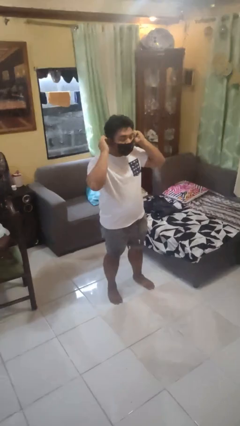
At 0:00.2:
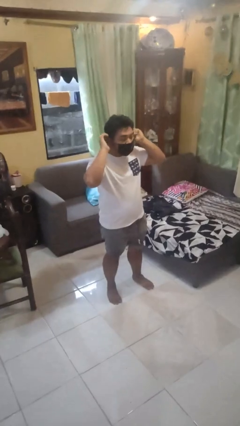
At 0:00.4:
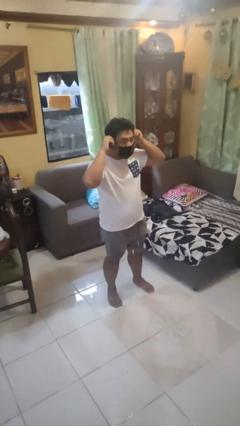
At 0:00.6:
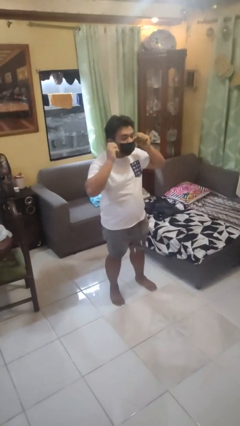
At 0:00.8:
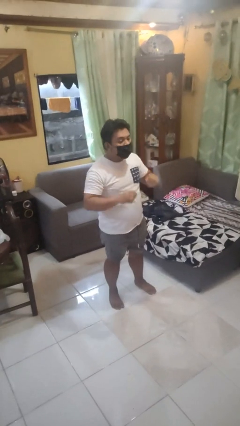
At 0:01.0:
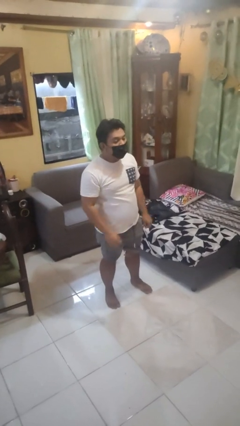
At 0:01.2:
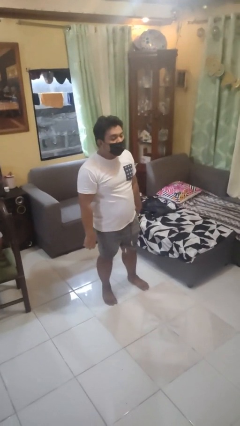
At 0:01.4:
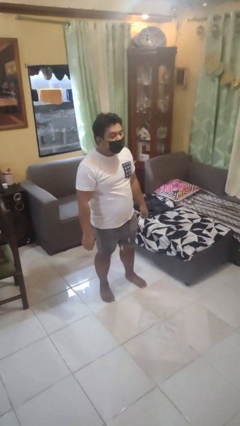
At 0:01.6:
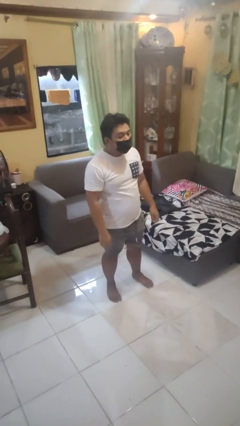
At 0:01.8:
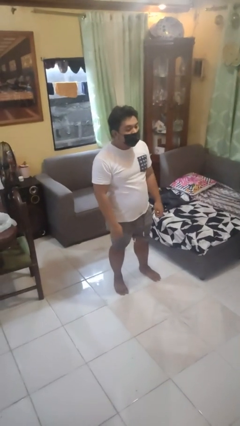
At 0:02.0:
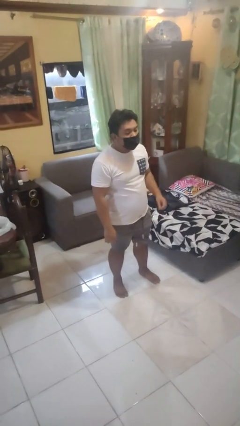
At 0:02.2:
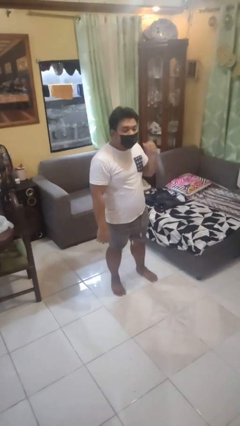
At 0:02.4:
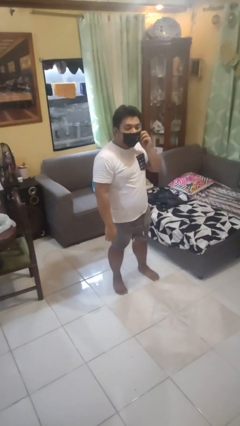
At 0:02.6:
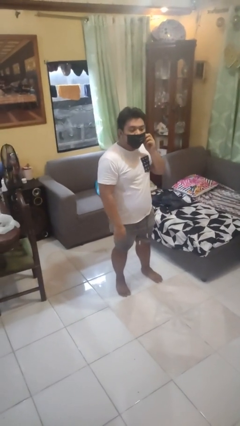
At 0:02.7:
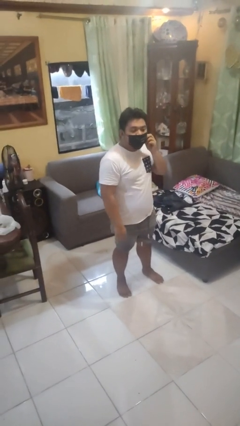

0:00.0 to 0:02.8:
person puts on facemask

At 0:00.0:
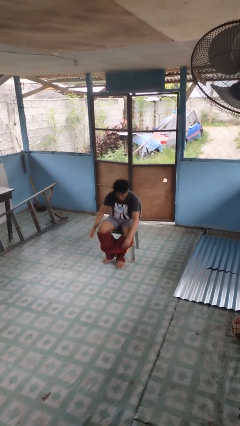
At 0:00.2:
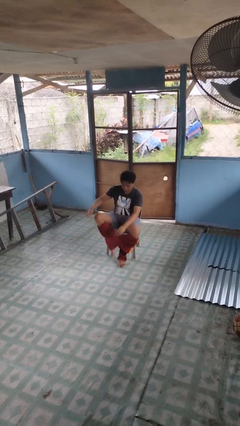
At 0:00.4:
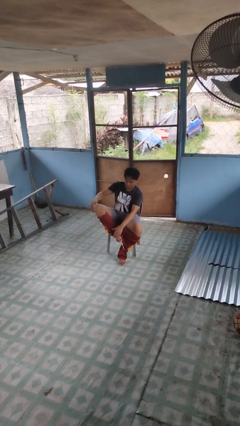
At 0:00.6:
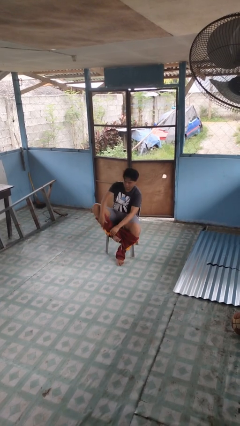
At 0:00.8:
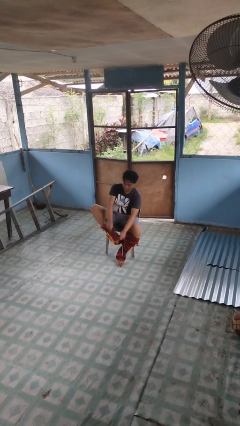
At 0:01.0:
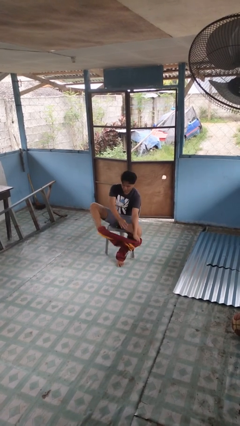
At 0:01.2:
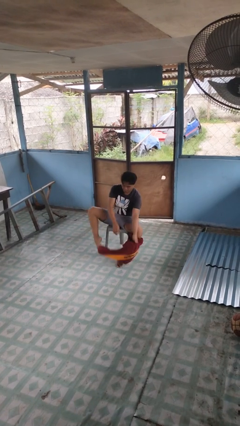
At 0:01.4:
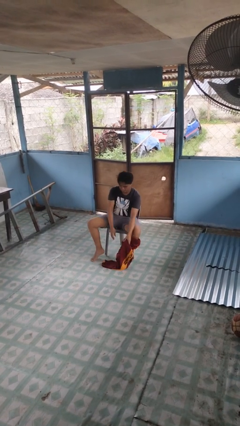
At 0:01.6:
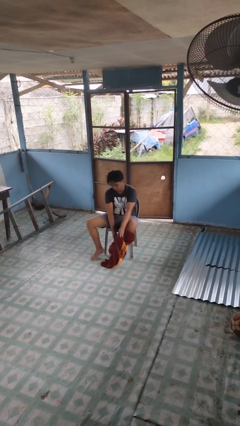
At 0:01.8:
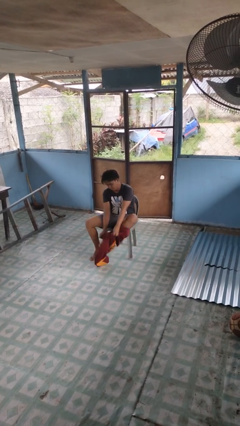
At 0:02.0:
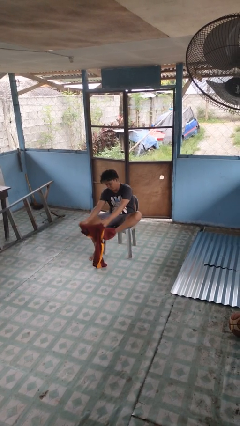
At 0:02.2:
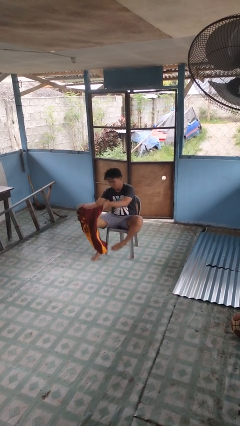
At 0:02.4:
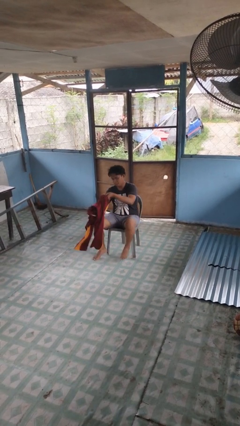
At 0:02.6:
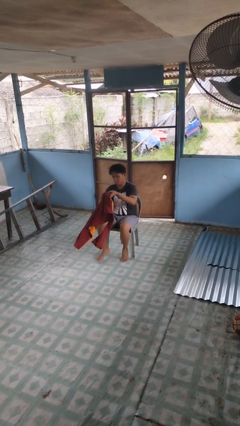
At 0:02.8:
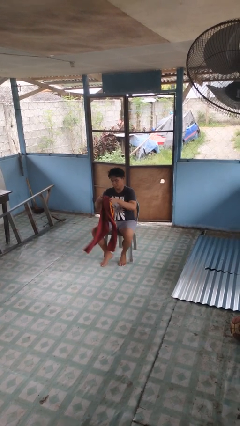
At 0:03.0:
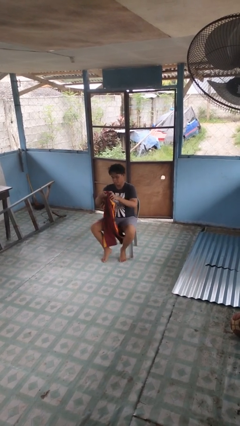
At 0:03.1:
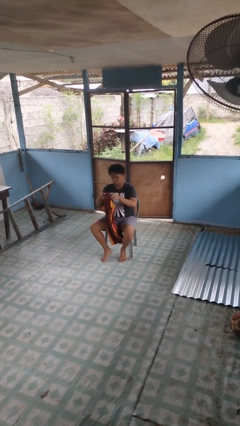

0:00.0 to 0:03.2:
person takes off pants

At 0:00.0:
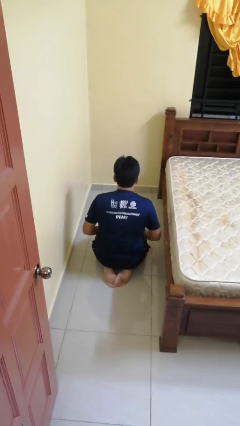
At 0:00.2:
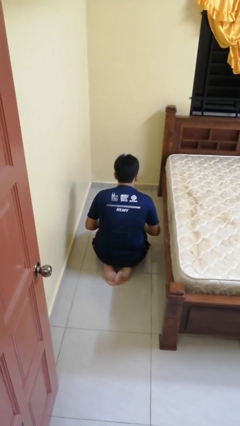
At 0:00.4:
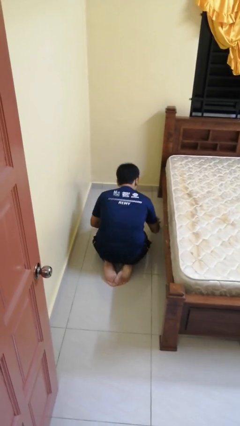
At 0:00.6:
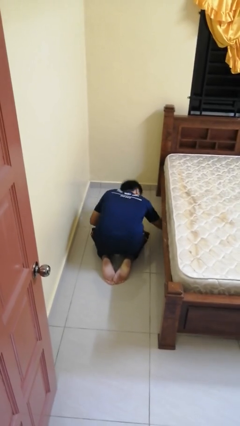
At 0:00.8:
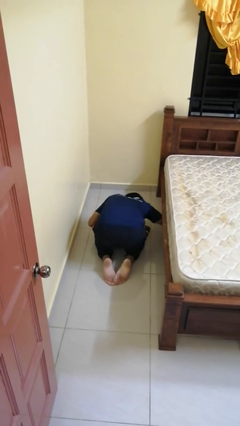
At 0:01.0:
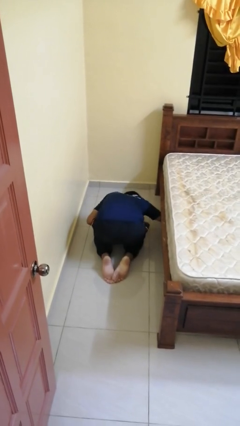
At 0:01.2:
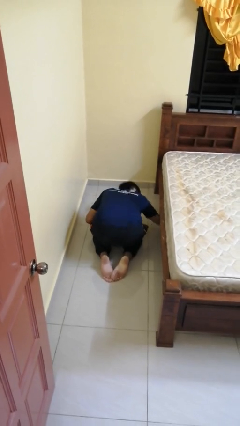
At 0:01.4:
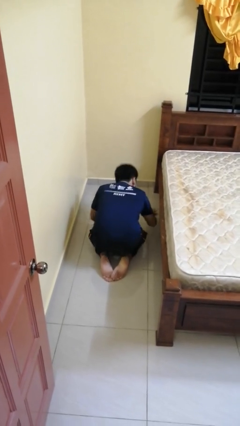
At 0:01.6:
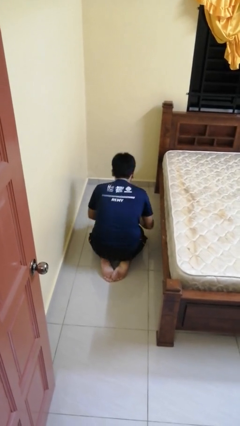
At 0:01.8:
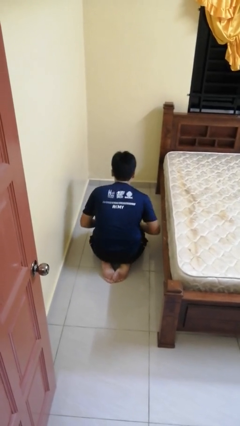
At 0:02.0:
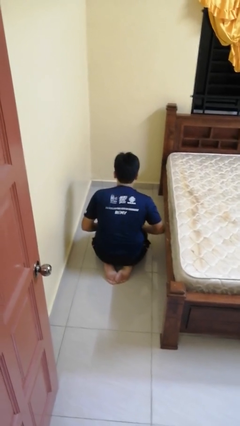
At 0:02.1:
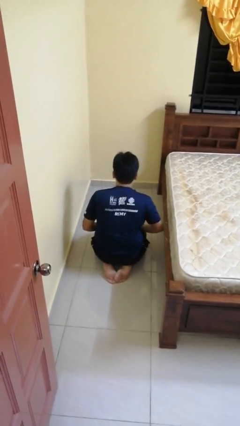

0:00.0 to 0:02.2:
person searches under bed

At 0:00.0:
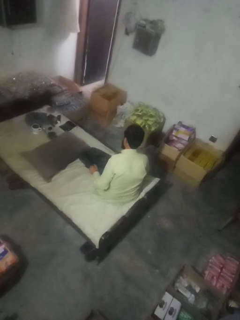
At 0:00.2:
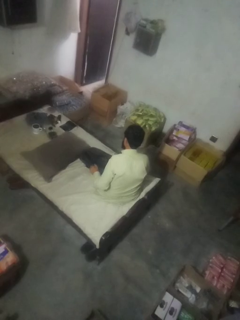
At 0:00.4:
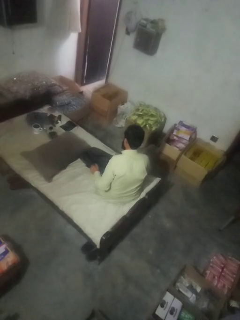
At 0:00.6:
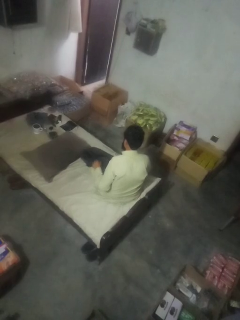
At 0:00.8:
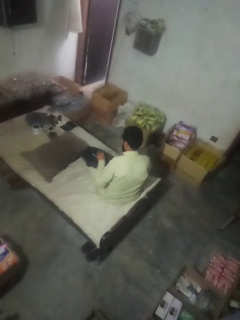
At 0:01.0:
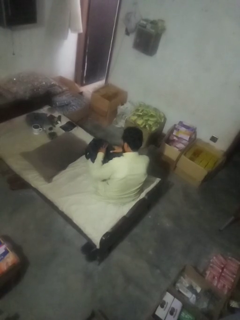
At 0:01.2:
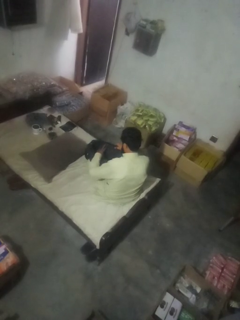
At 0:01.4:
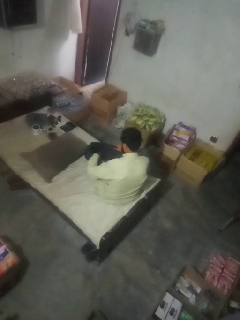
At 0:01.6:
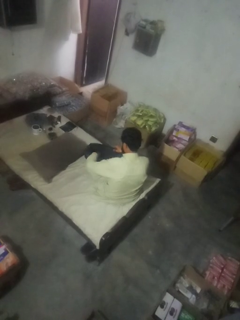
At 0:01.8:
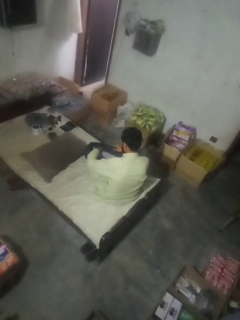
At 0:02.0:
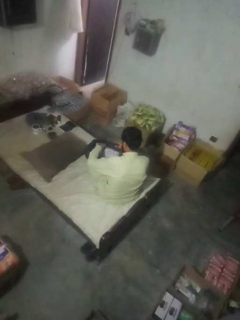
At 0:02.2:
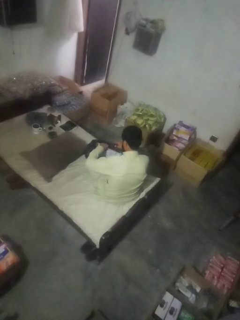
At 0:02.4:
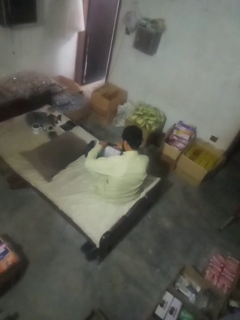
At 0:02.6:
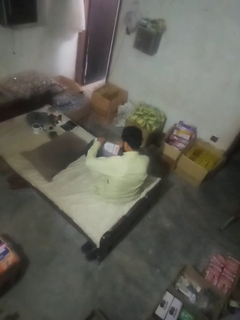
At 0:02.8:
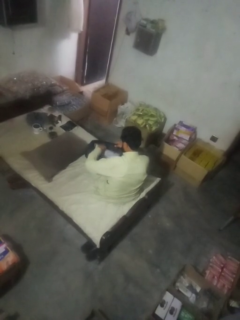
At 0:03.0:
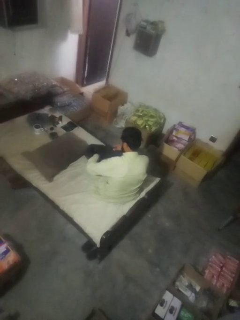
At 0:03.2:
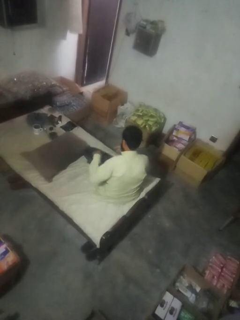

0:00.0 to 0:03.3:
person searches in bag

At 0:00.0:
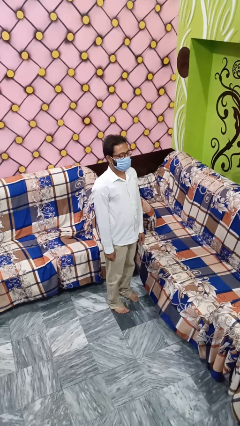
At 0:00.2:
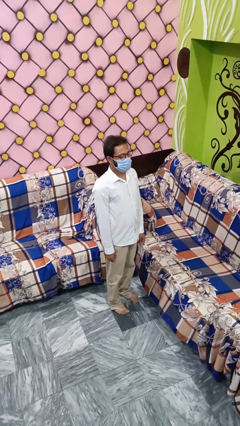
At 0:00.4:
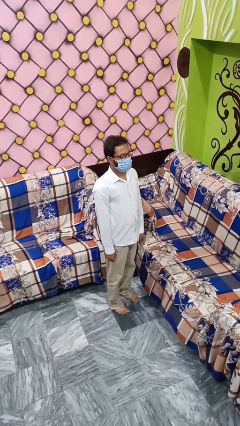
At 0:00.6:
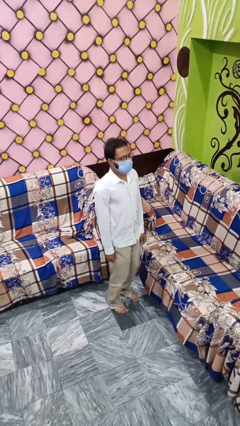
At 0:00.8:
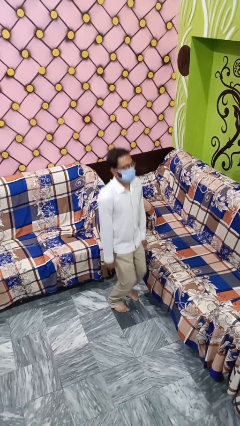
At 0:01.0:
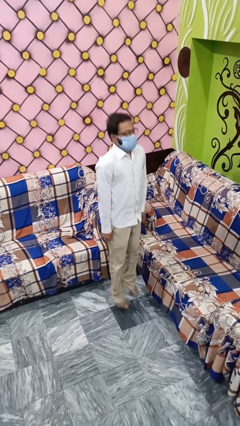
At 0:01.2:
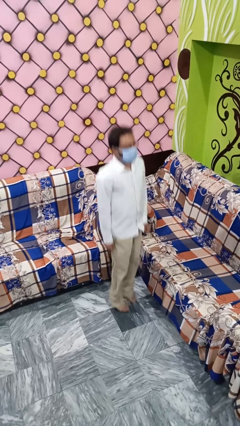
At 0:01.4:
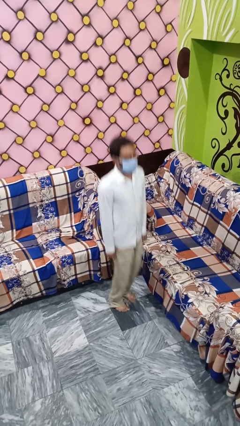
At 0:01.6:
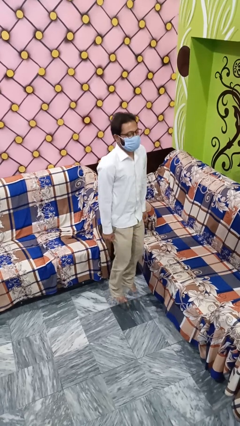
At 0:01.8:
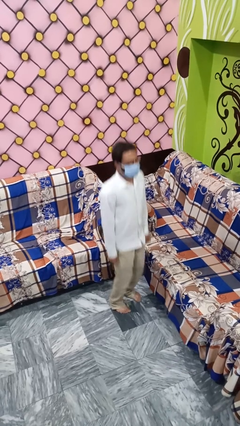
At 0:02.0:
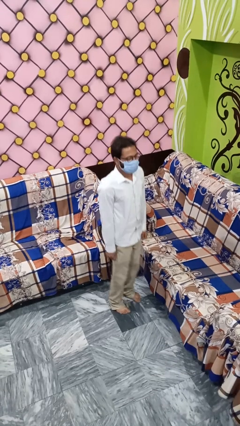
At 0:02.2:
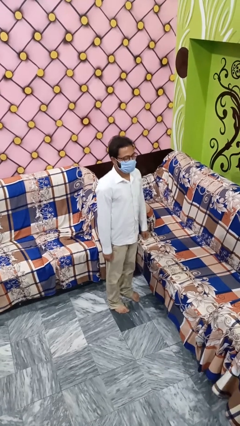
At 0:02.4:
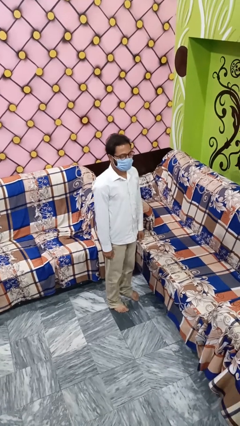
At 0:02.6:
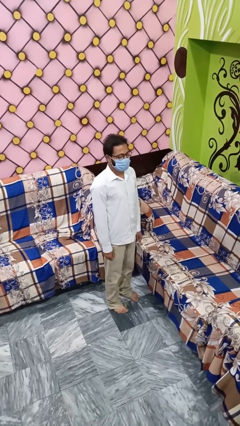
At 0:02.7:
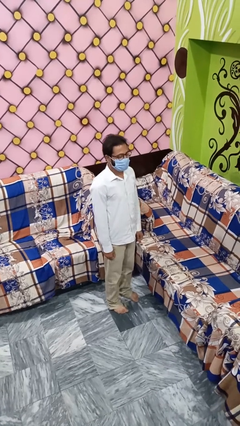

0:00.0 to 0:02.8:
person jumps

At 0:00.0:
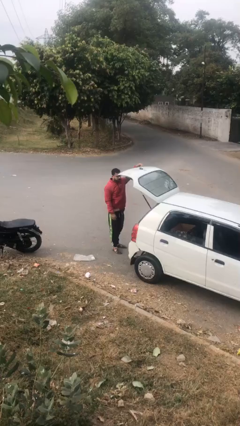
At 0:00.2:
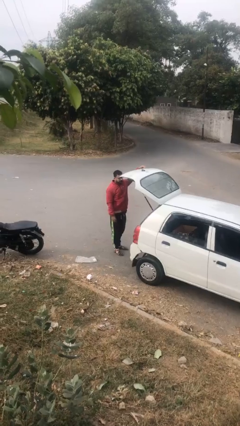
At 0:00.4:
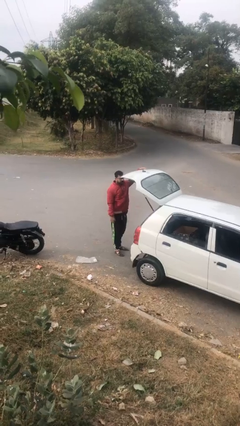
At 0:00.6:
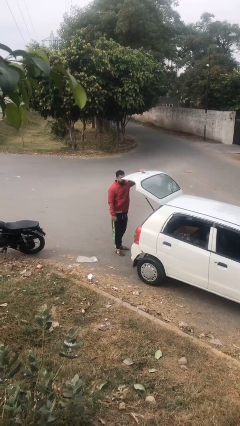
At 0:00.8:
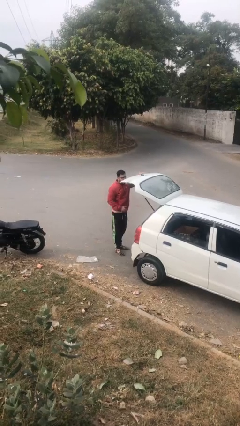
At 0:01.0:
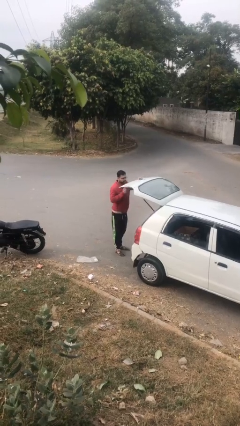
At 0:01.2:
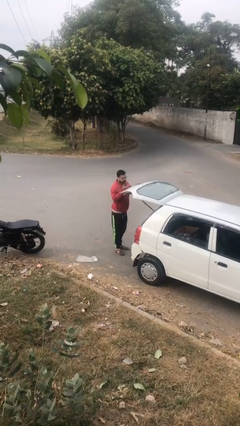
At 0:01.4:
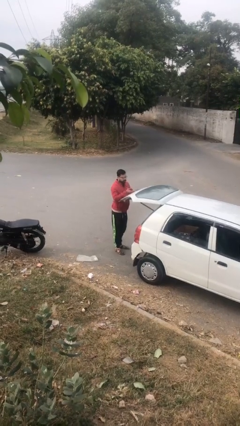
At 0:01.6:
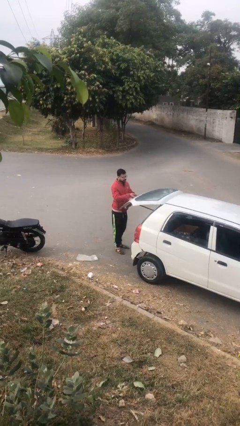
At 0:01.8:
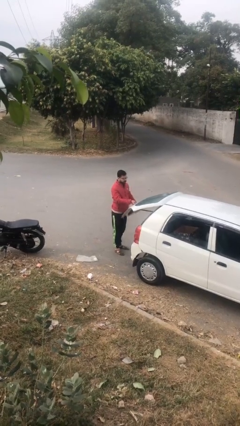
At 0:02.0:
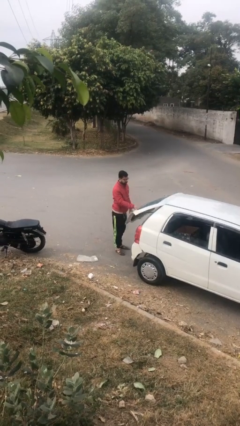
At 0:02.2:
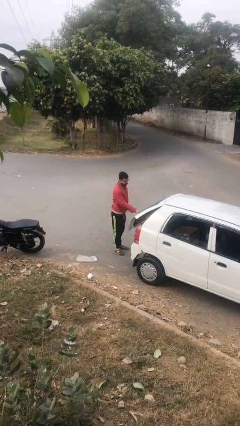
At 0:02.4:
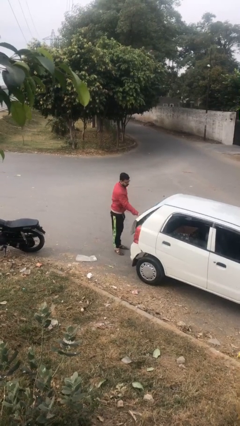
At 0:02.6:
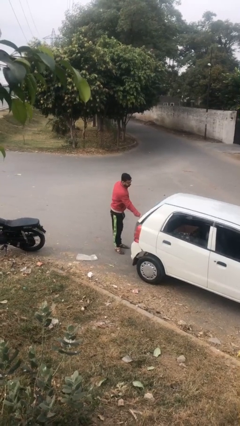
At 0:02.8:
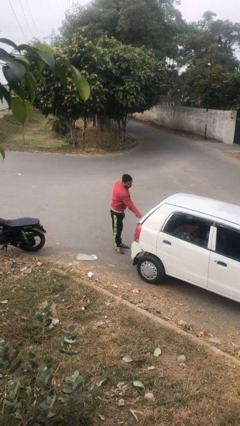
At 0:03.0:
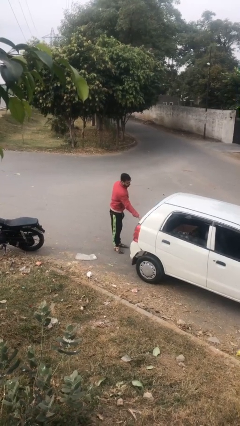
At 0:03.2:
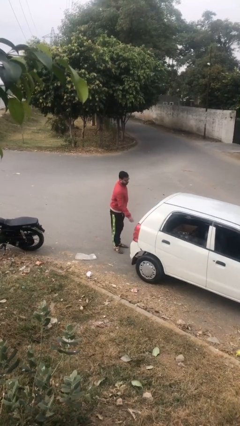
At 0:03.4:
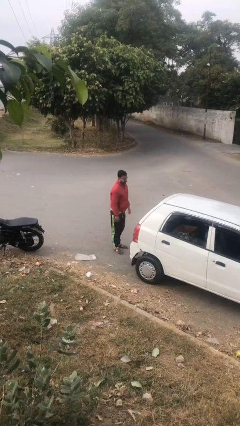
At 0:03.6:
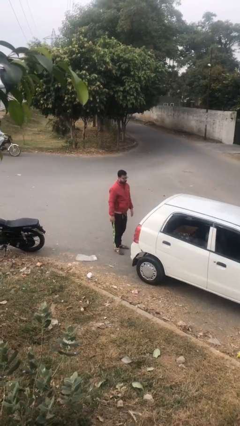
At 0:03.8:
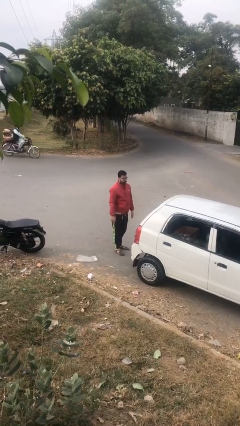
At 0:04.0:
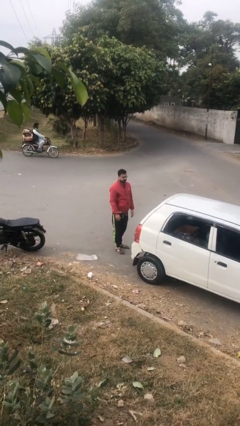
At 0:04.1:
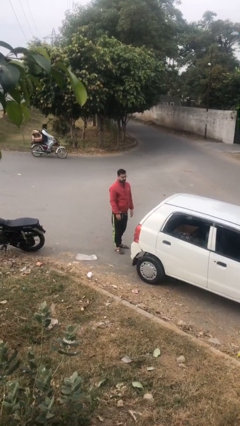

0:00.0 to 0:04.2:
person closes car trunk
